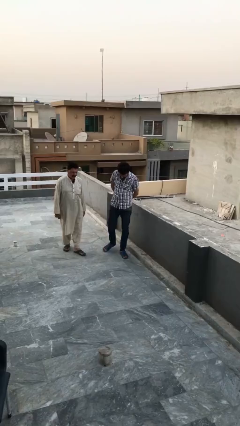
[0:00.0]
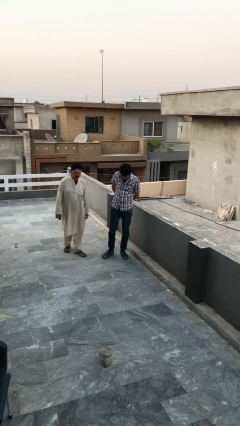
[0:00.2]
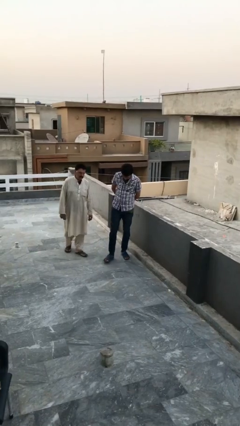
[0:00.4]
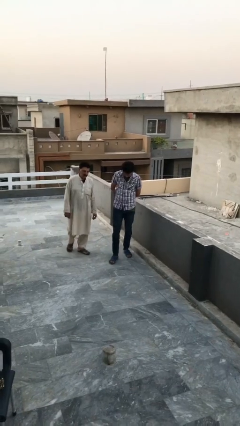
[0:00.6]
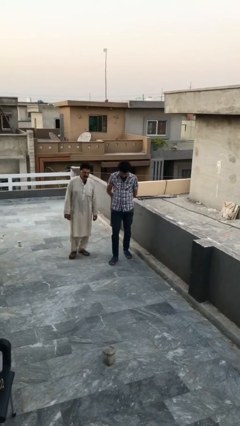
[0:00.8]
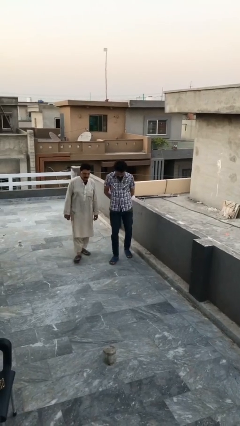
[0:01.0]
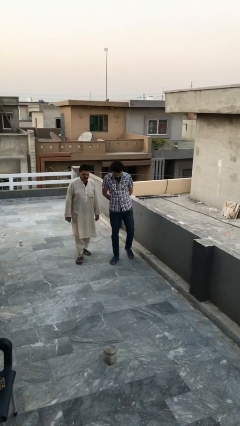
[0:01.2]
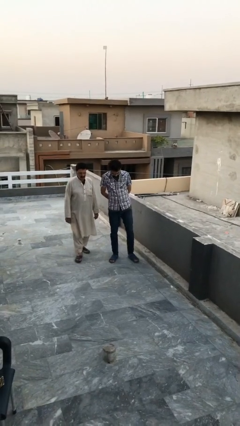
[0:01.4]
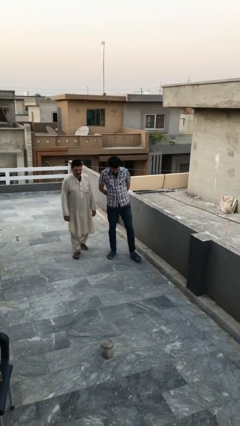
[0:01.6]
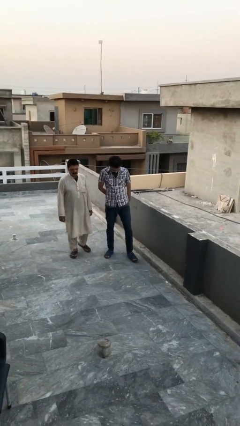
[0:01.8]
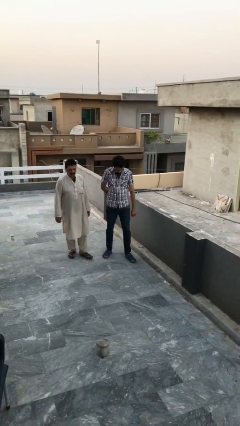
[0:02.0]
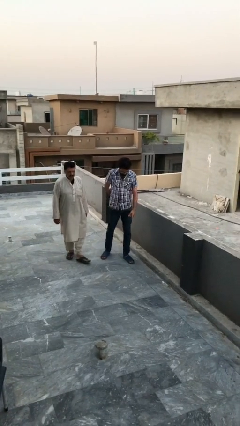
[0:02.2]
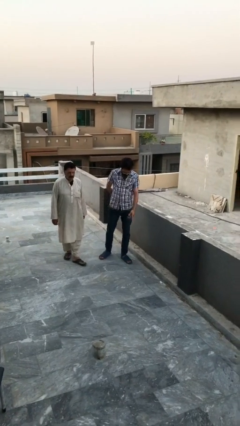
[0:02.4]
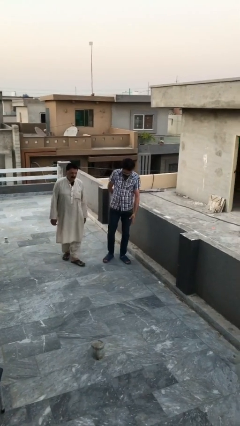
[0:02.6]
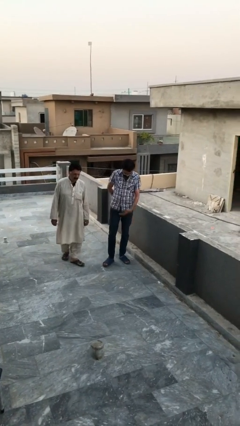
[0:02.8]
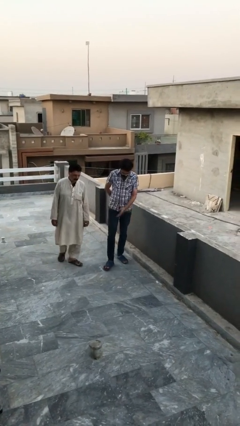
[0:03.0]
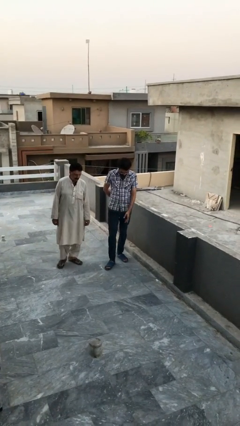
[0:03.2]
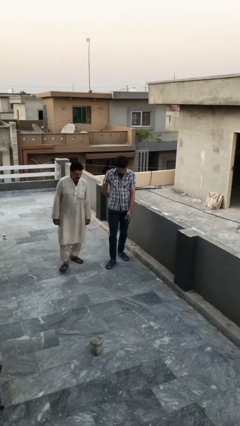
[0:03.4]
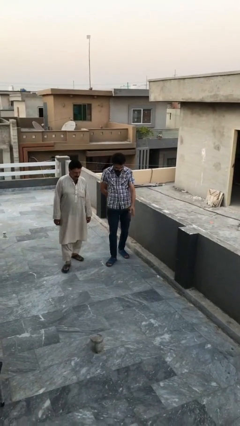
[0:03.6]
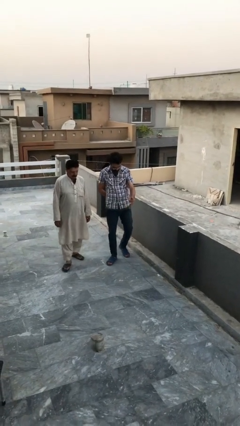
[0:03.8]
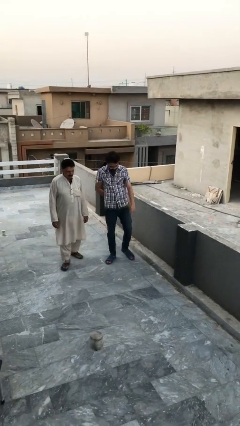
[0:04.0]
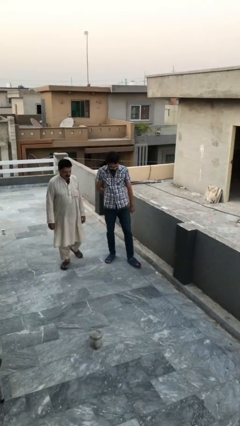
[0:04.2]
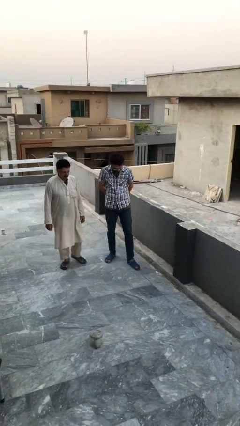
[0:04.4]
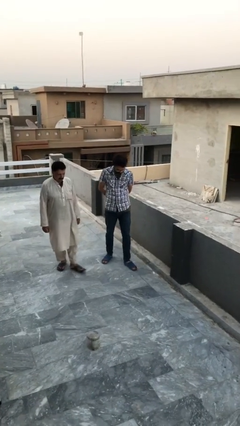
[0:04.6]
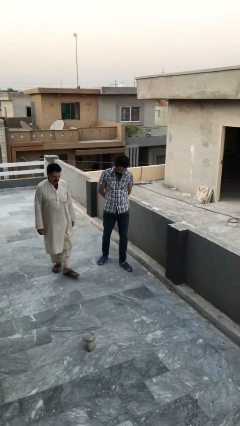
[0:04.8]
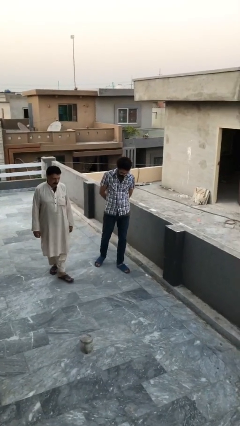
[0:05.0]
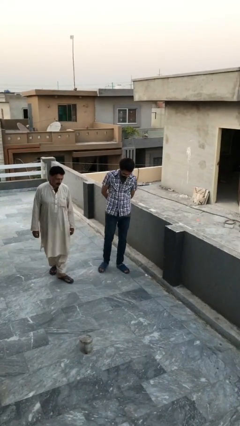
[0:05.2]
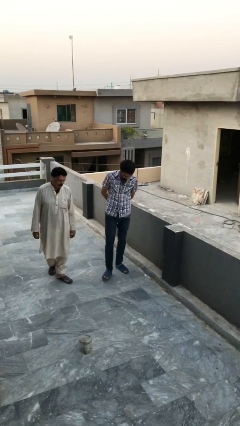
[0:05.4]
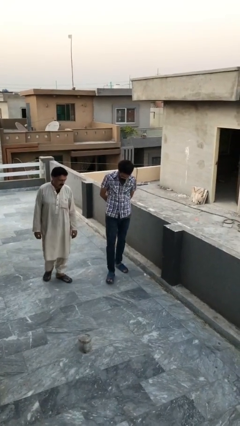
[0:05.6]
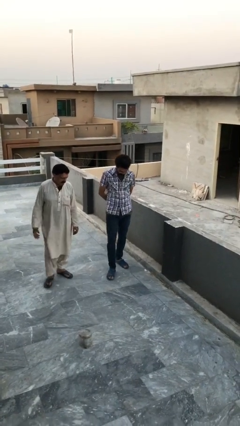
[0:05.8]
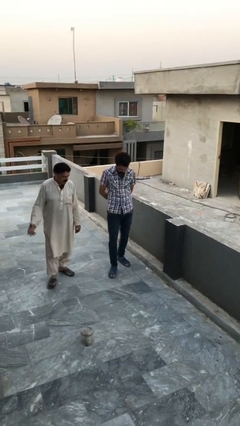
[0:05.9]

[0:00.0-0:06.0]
person talks to person

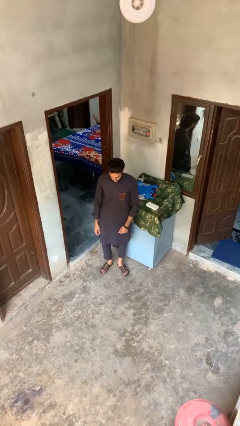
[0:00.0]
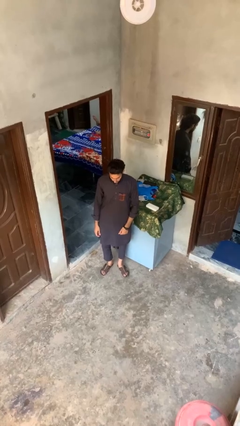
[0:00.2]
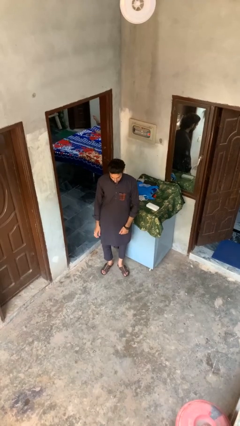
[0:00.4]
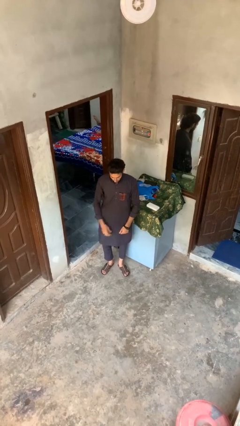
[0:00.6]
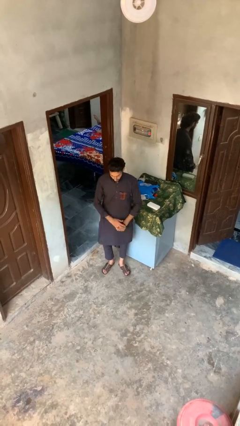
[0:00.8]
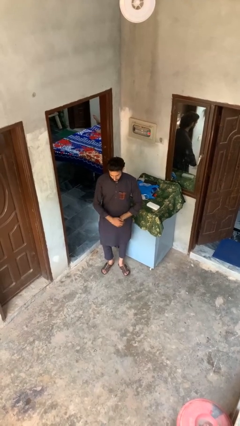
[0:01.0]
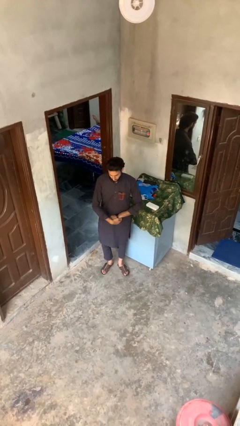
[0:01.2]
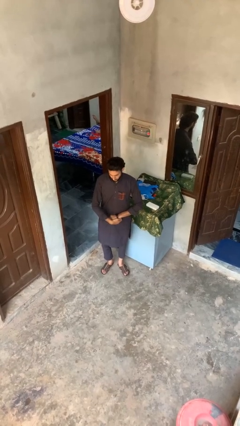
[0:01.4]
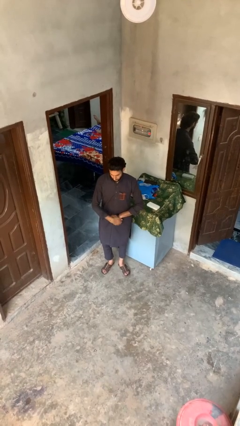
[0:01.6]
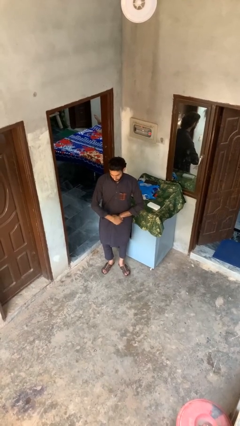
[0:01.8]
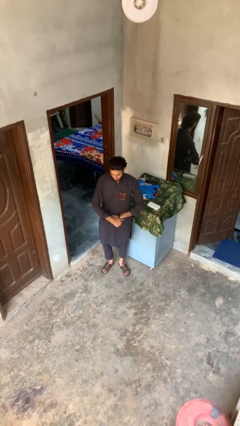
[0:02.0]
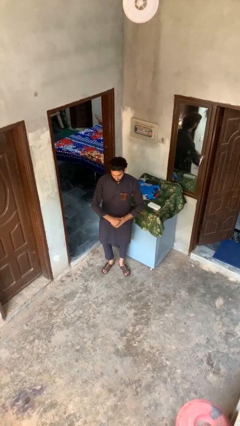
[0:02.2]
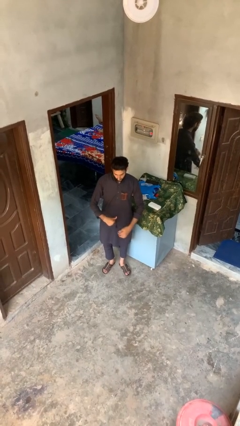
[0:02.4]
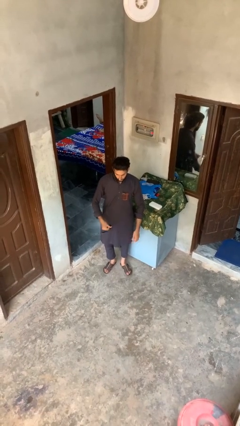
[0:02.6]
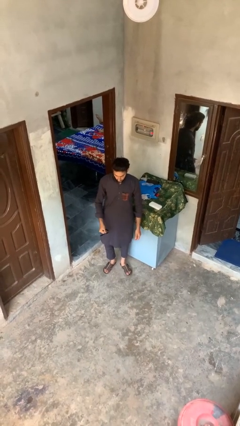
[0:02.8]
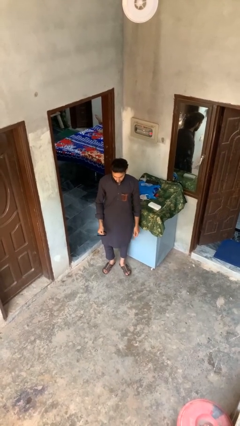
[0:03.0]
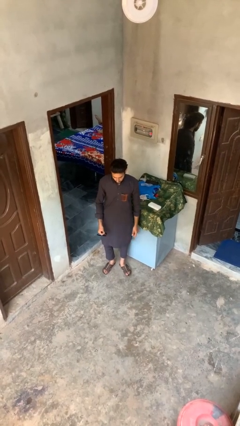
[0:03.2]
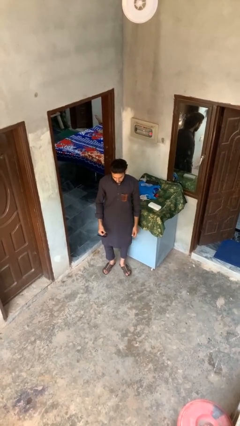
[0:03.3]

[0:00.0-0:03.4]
person takes off wristwatch

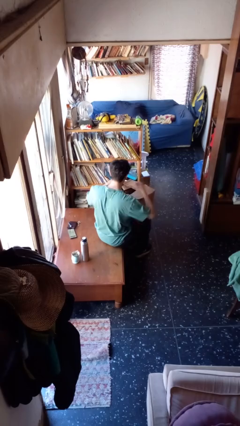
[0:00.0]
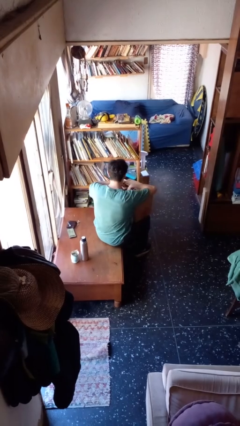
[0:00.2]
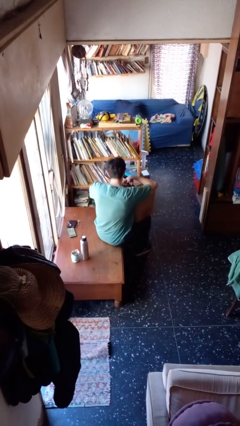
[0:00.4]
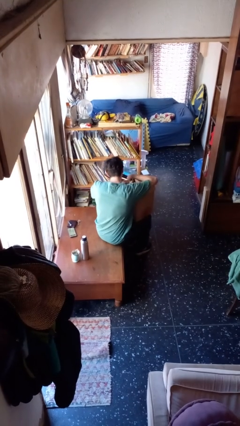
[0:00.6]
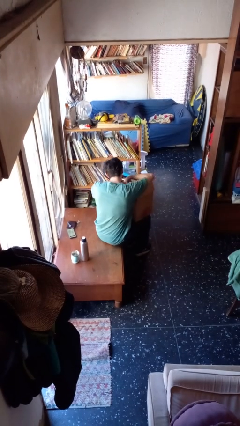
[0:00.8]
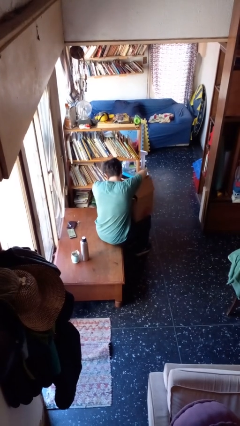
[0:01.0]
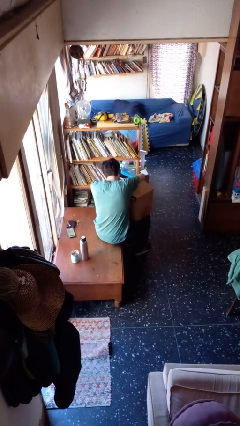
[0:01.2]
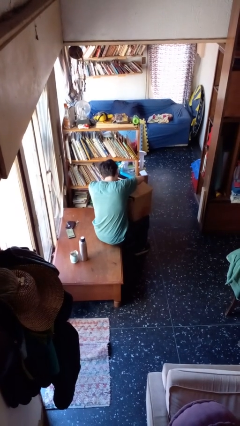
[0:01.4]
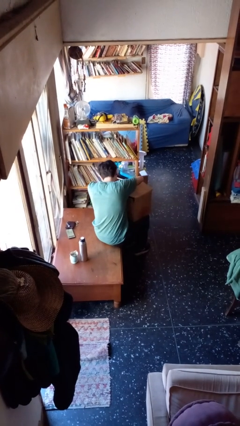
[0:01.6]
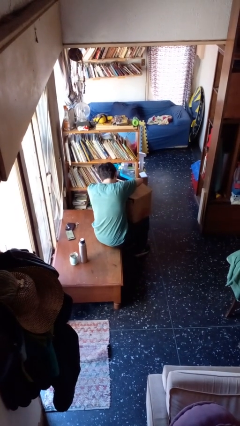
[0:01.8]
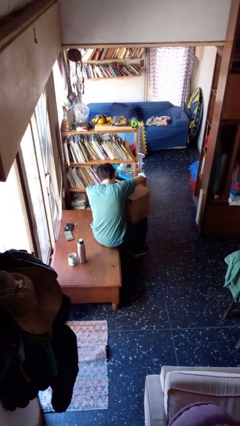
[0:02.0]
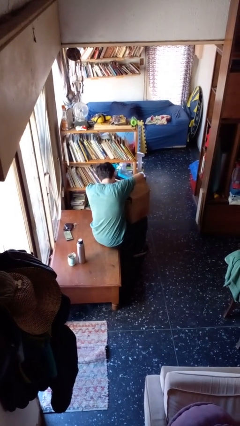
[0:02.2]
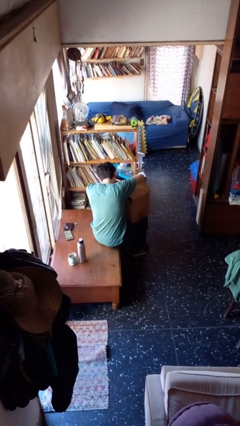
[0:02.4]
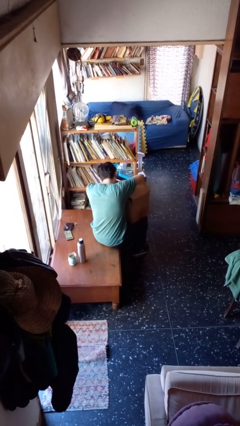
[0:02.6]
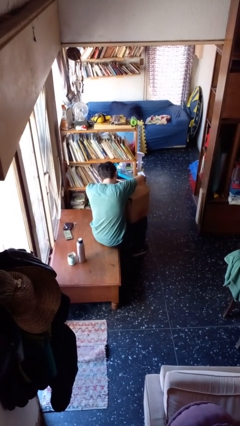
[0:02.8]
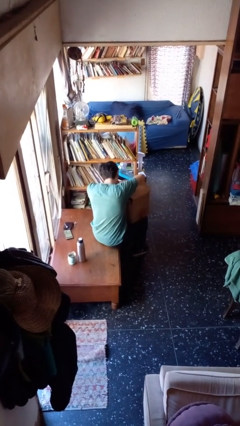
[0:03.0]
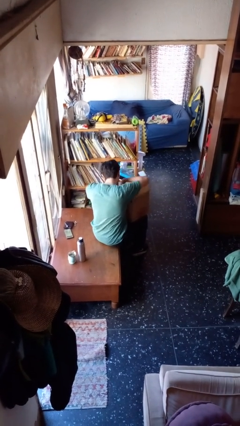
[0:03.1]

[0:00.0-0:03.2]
person searches in box

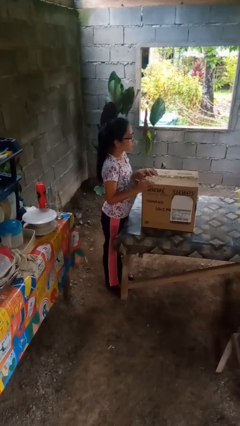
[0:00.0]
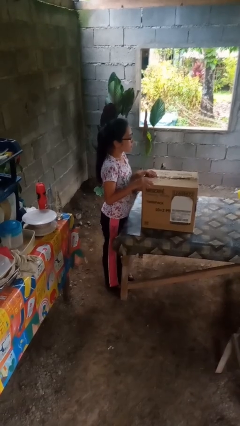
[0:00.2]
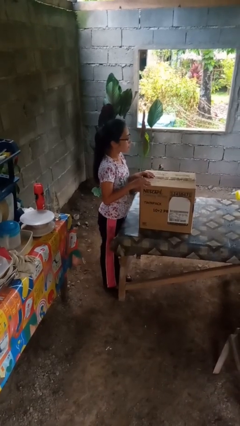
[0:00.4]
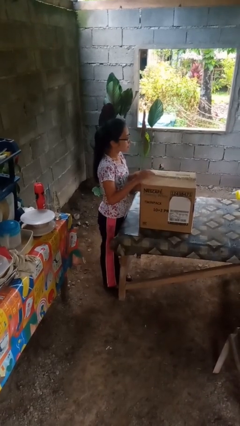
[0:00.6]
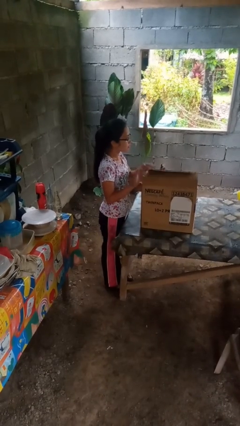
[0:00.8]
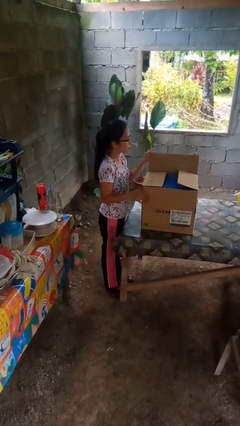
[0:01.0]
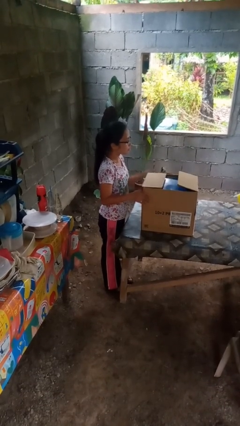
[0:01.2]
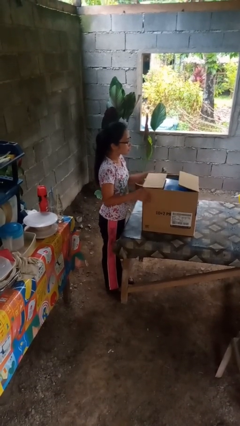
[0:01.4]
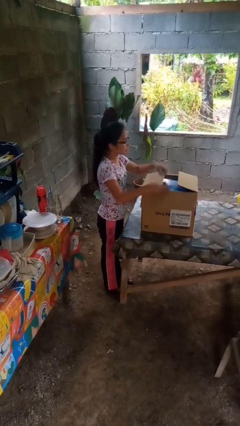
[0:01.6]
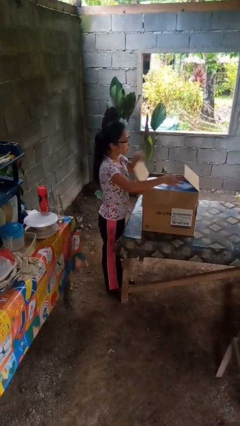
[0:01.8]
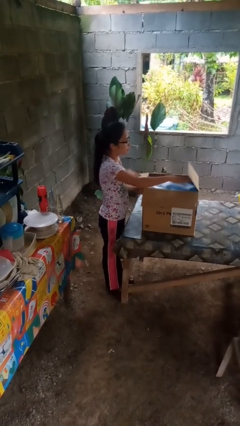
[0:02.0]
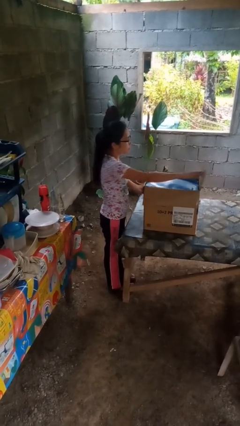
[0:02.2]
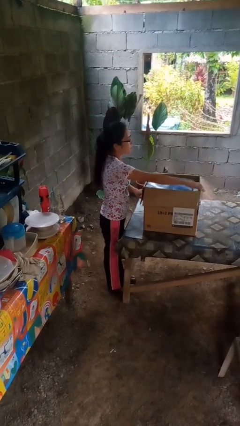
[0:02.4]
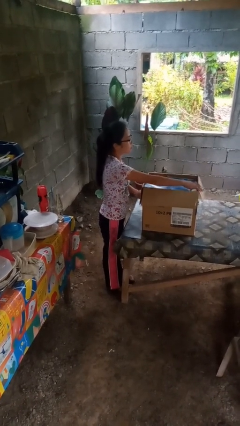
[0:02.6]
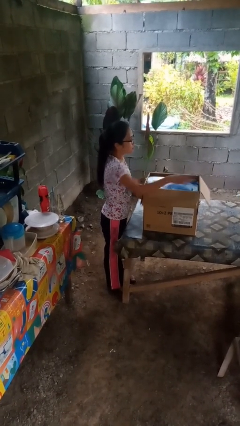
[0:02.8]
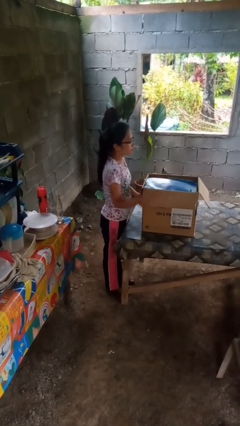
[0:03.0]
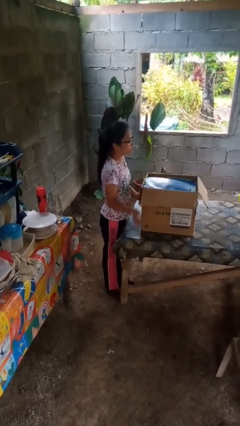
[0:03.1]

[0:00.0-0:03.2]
person opens box

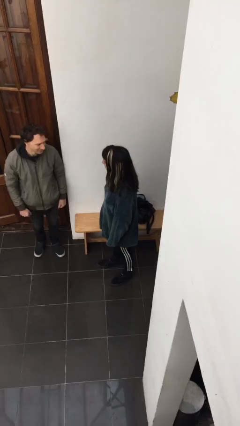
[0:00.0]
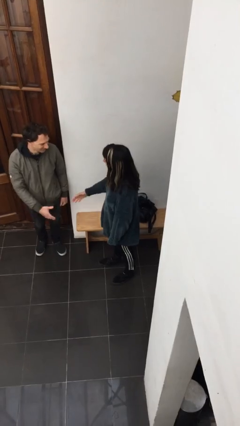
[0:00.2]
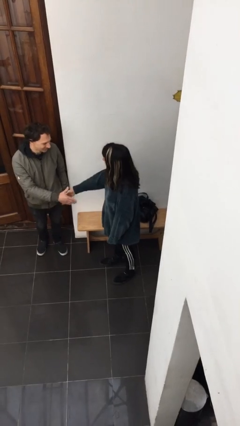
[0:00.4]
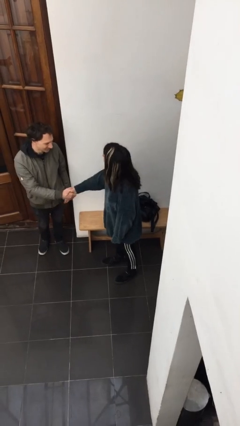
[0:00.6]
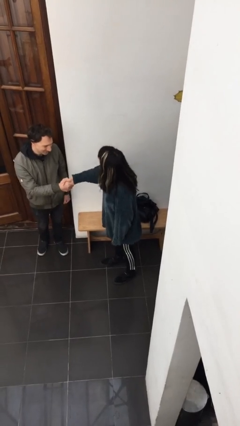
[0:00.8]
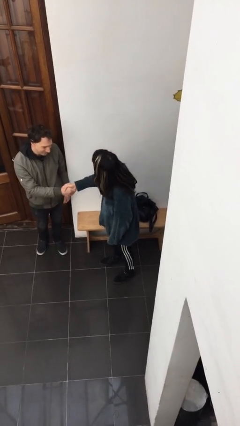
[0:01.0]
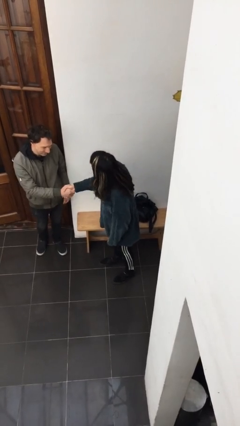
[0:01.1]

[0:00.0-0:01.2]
person shakes hand

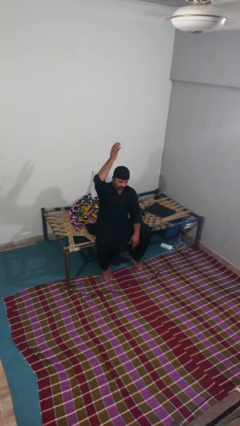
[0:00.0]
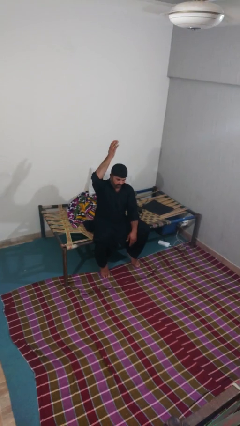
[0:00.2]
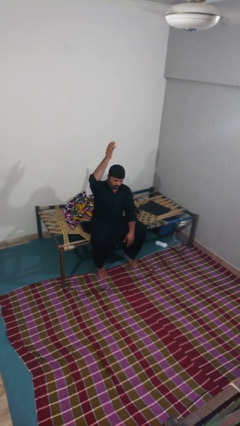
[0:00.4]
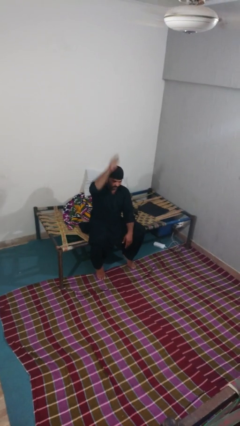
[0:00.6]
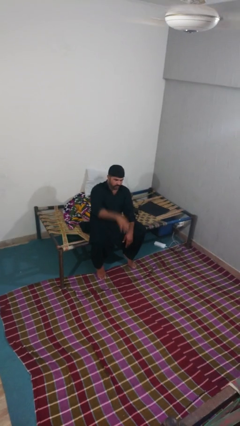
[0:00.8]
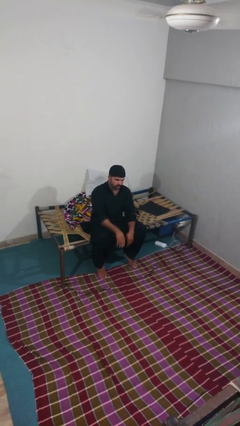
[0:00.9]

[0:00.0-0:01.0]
person gestures swipe down
